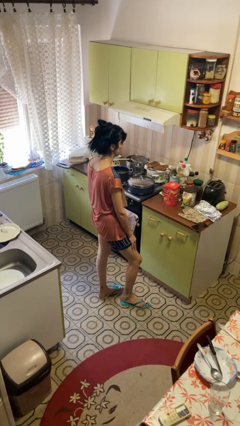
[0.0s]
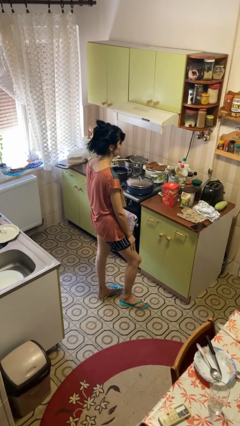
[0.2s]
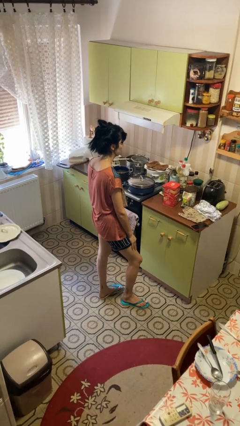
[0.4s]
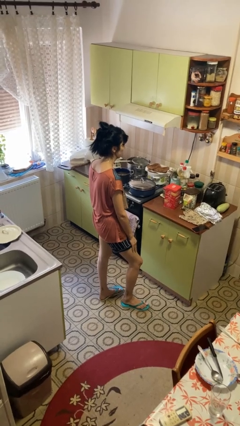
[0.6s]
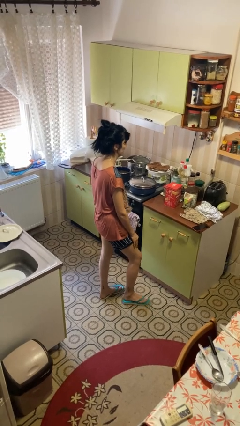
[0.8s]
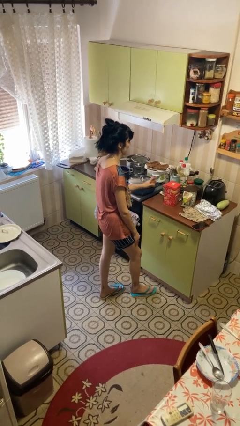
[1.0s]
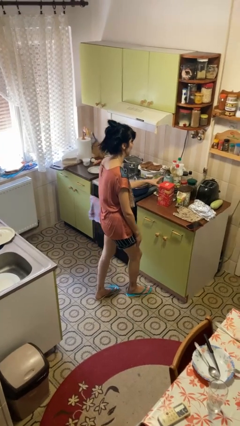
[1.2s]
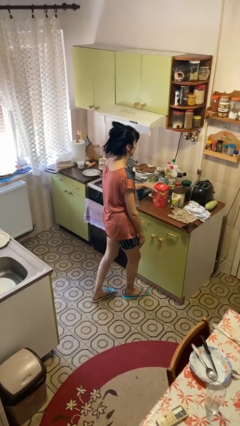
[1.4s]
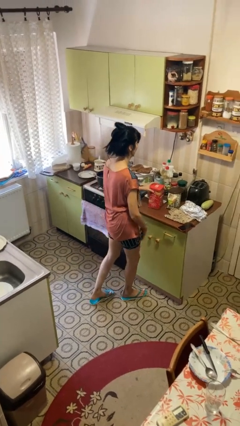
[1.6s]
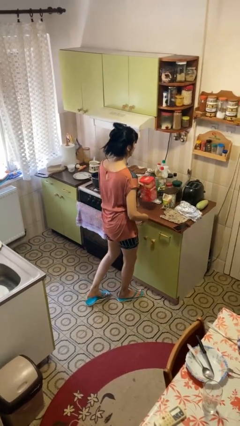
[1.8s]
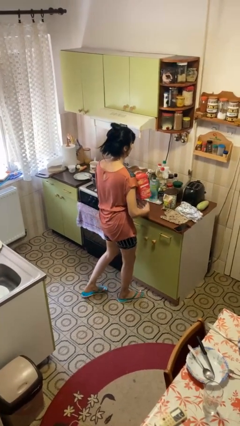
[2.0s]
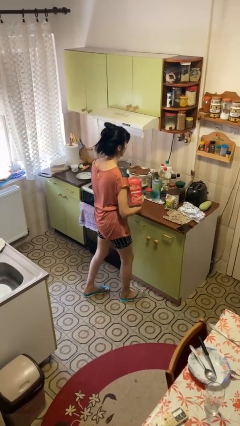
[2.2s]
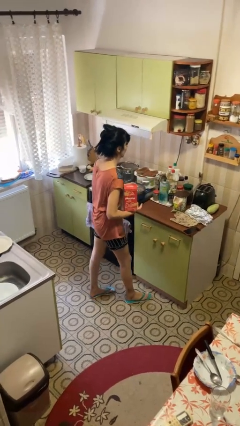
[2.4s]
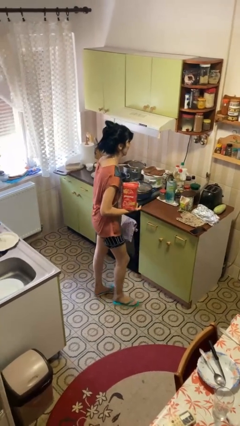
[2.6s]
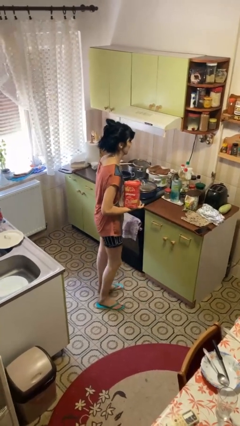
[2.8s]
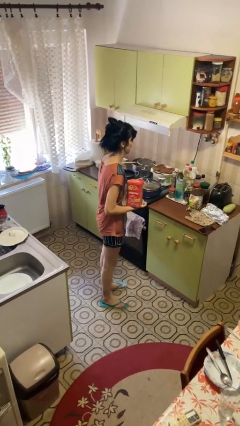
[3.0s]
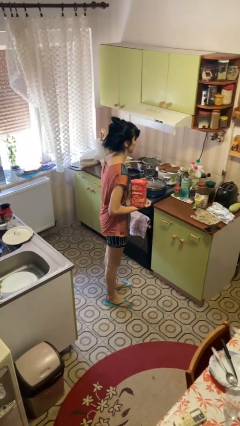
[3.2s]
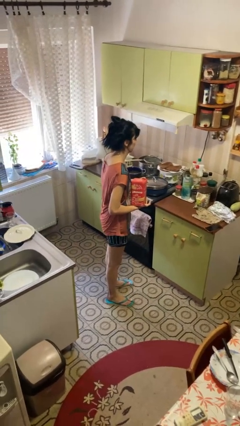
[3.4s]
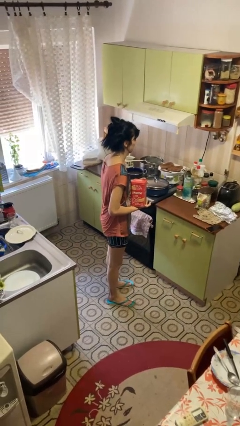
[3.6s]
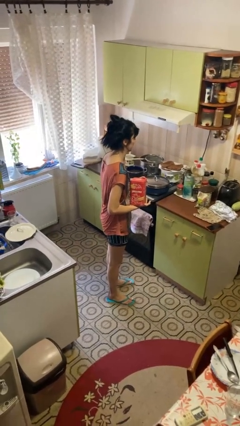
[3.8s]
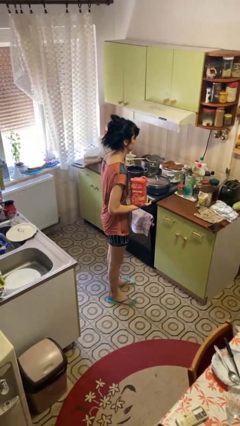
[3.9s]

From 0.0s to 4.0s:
person picks up object from countertop

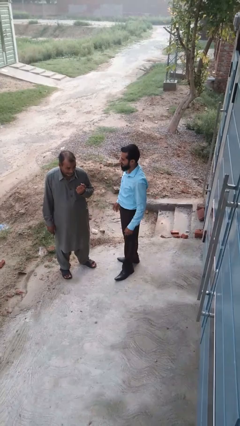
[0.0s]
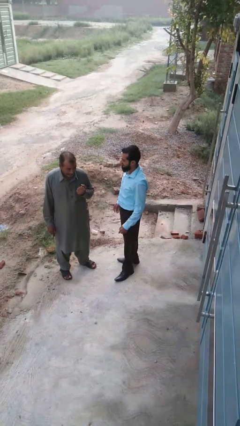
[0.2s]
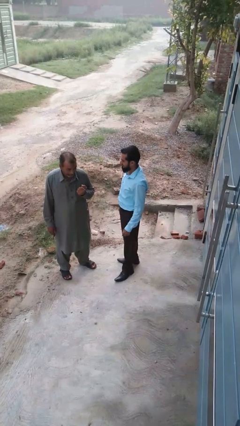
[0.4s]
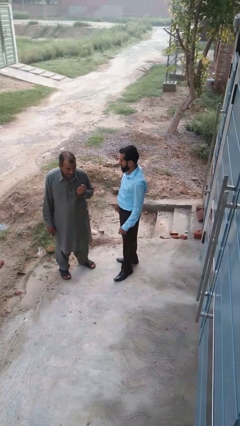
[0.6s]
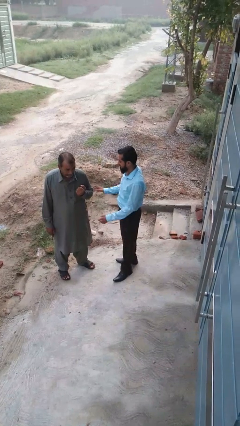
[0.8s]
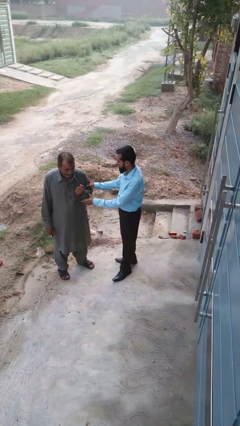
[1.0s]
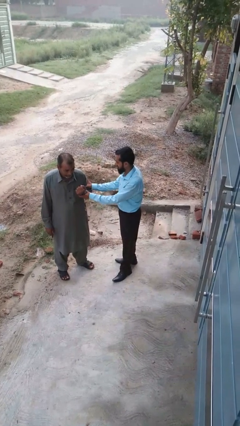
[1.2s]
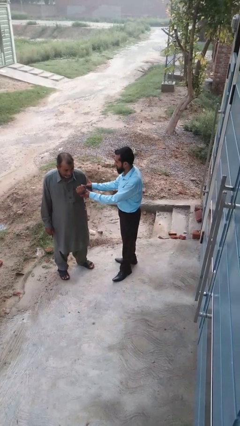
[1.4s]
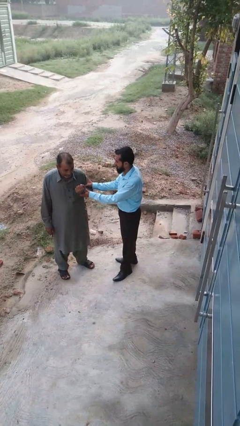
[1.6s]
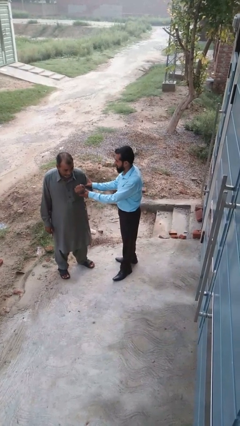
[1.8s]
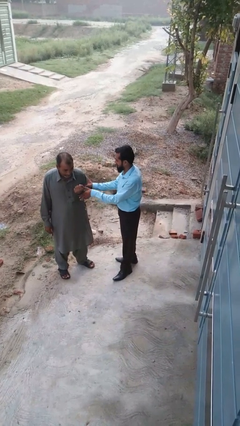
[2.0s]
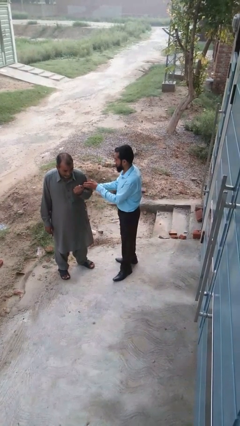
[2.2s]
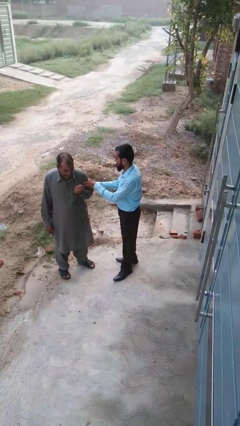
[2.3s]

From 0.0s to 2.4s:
person grabs person by bicep

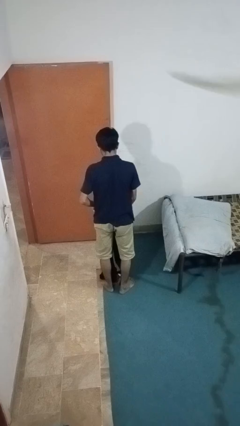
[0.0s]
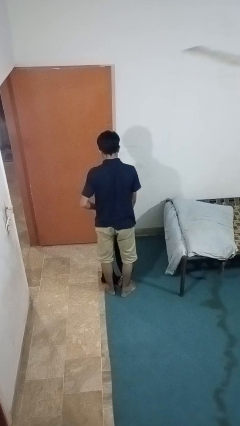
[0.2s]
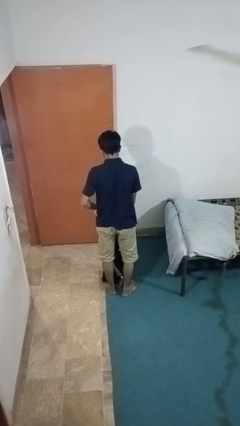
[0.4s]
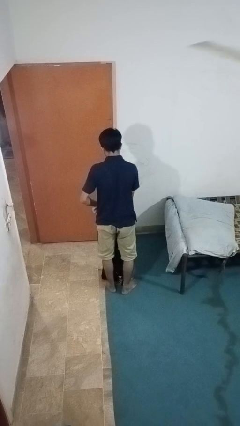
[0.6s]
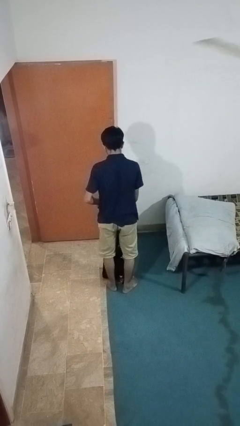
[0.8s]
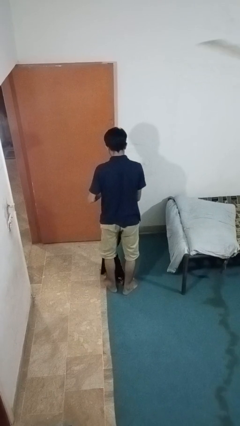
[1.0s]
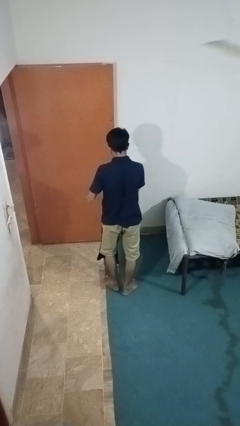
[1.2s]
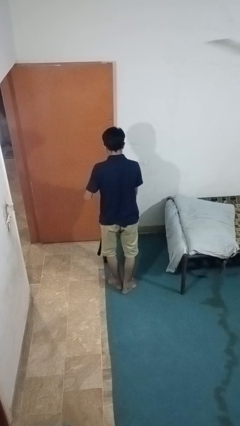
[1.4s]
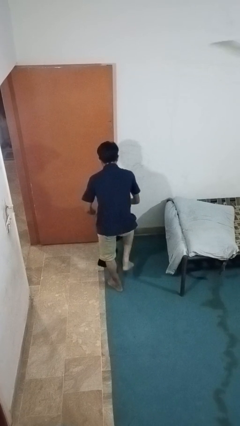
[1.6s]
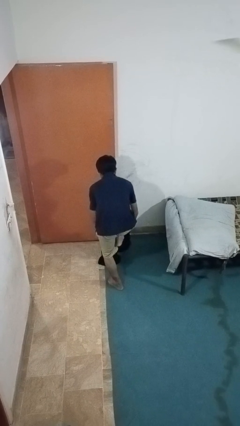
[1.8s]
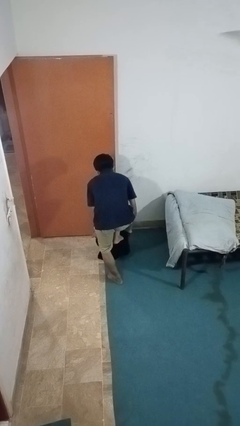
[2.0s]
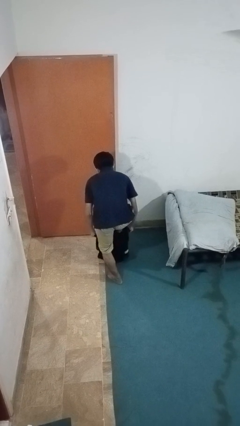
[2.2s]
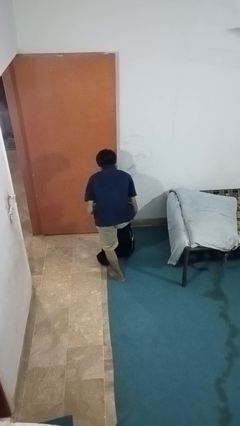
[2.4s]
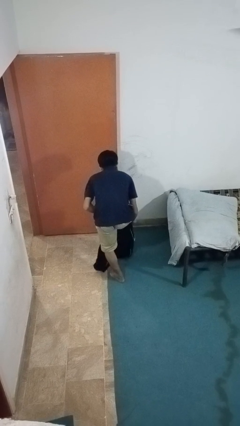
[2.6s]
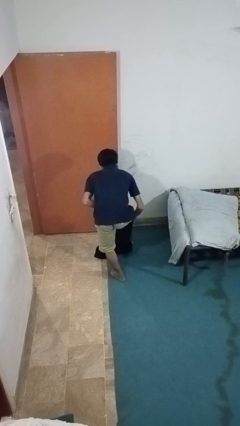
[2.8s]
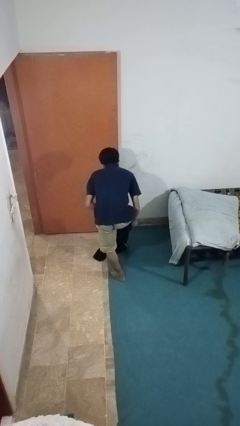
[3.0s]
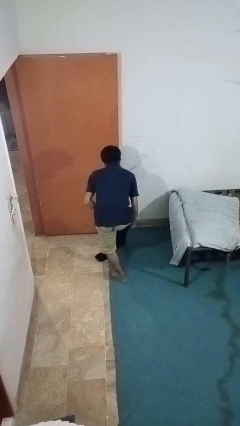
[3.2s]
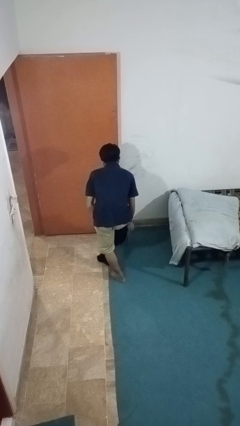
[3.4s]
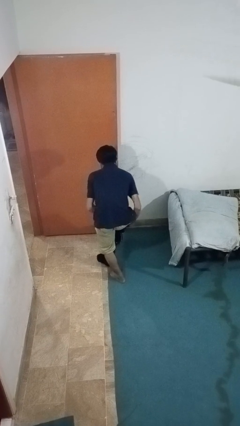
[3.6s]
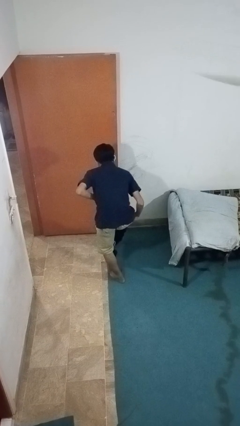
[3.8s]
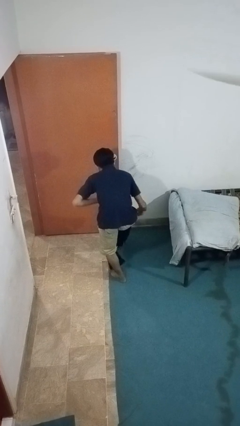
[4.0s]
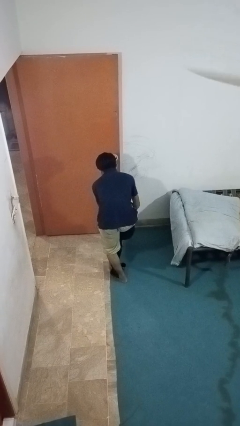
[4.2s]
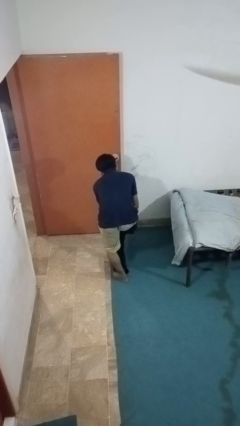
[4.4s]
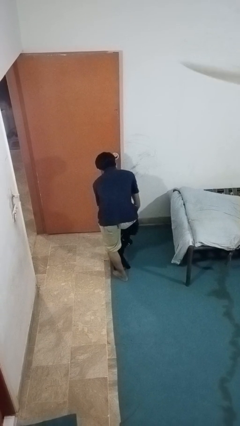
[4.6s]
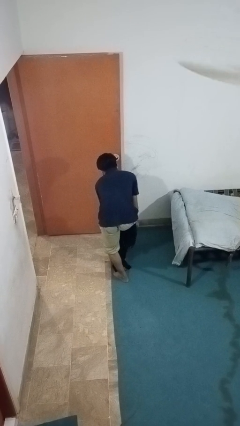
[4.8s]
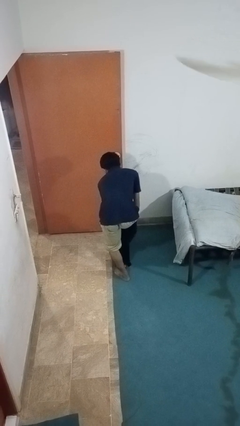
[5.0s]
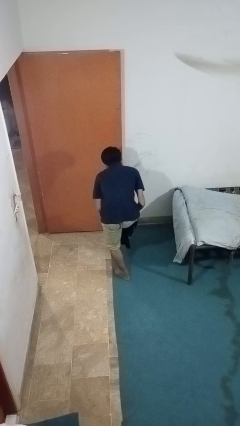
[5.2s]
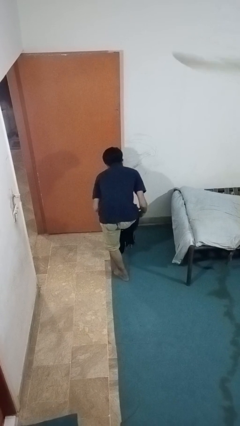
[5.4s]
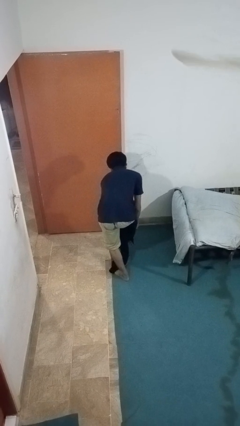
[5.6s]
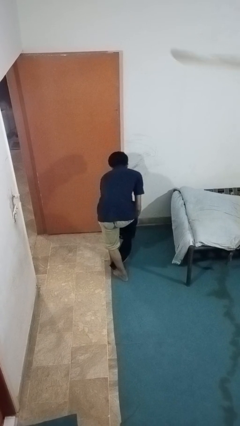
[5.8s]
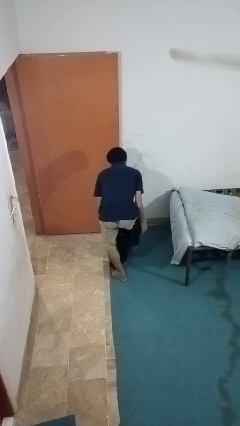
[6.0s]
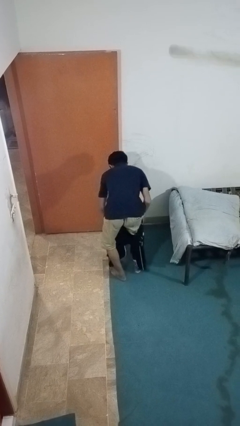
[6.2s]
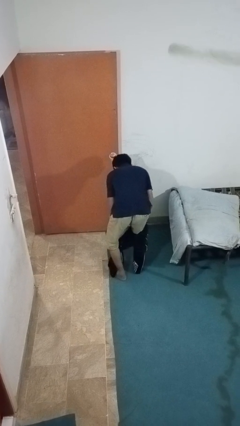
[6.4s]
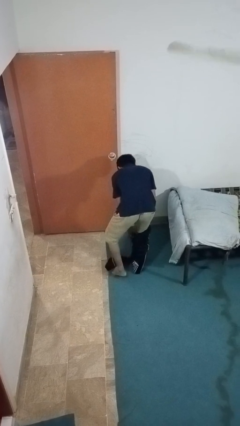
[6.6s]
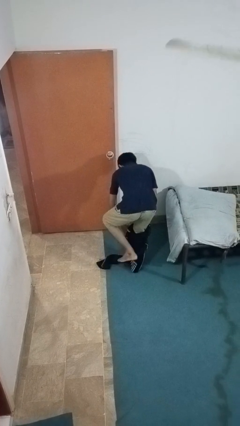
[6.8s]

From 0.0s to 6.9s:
person puts on pants

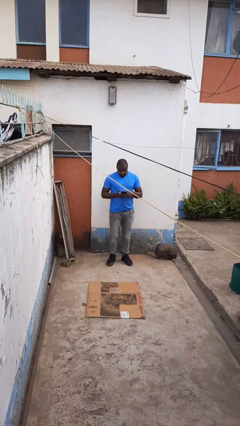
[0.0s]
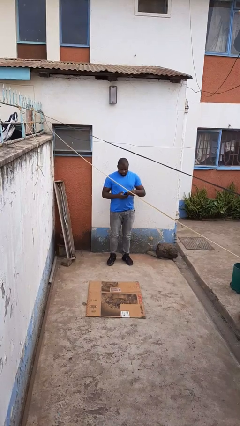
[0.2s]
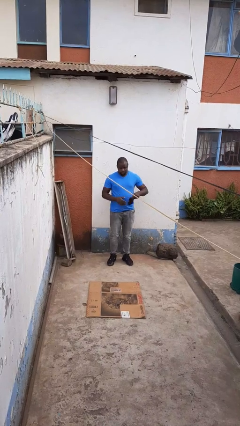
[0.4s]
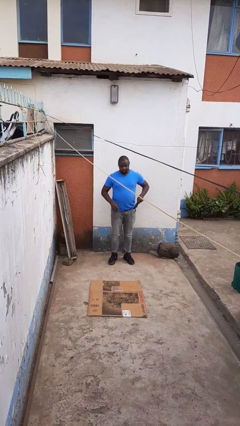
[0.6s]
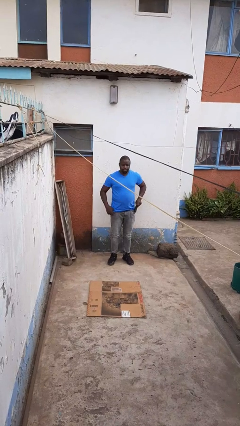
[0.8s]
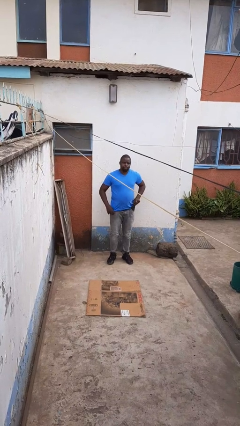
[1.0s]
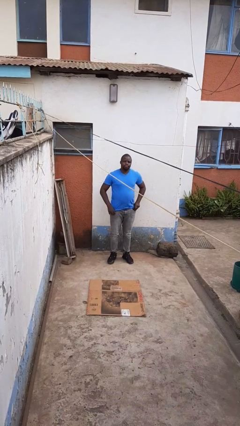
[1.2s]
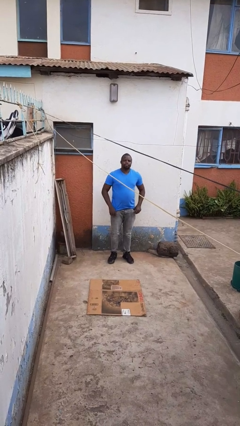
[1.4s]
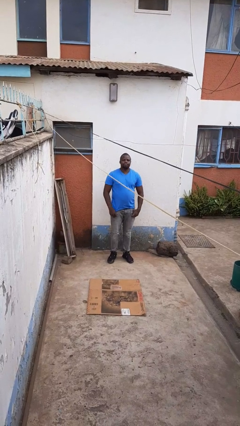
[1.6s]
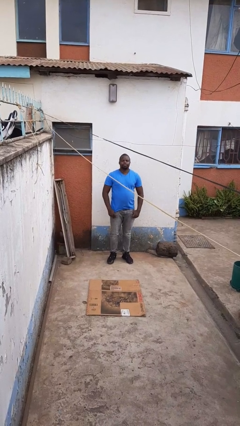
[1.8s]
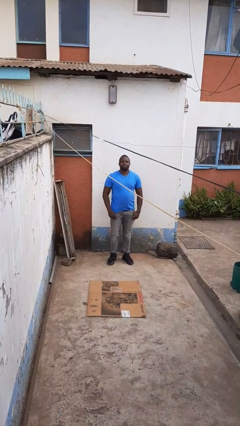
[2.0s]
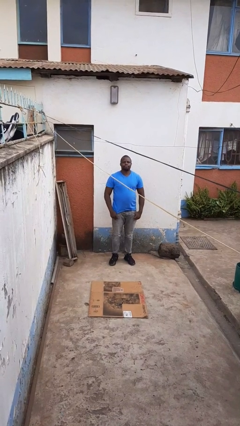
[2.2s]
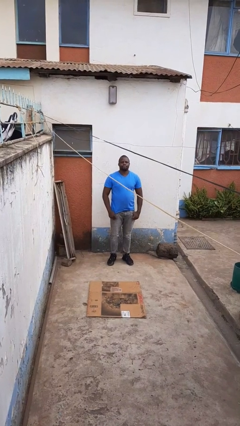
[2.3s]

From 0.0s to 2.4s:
person puts phone into pocket

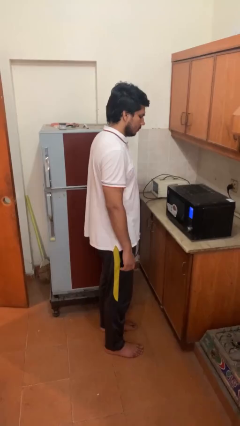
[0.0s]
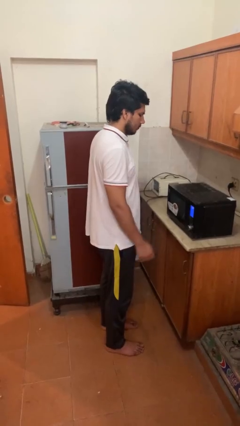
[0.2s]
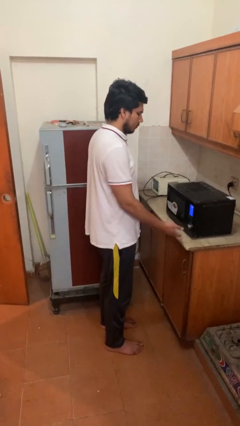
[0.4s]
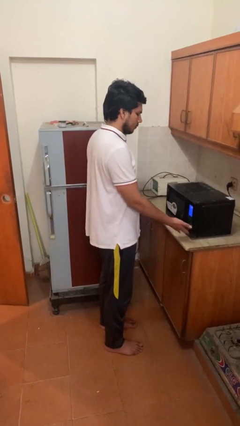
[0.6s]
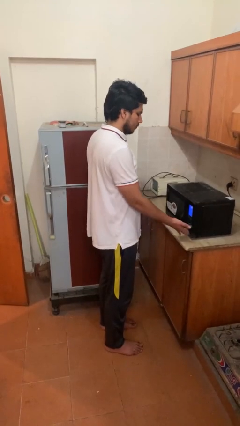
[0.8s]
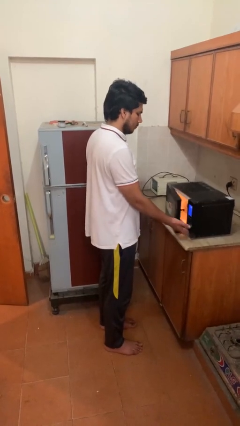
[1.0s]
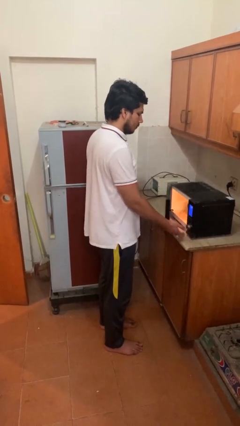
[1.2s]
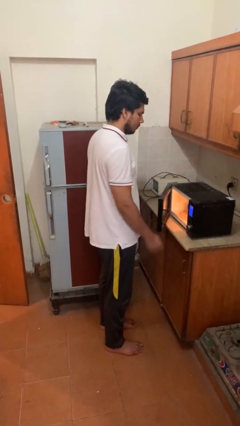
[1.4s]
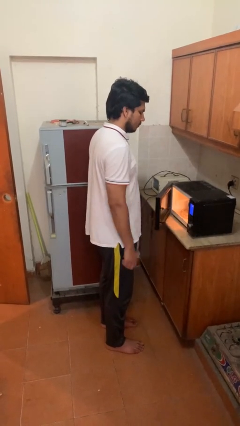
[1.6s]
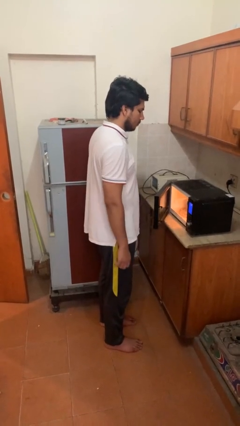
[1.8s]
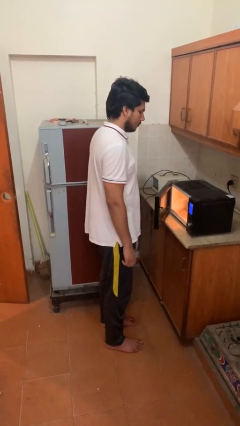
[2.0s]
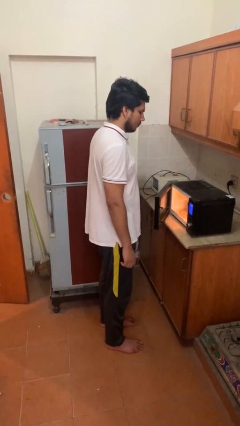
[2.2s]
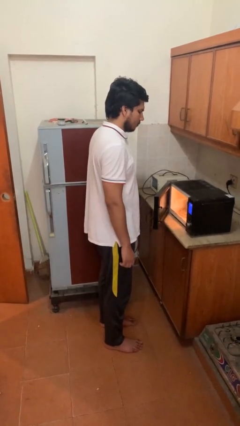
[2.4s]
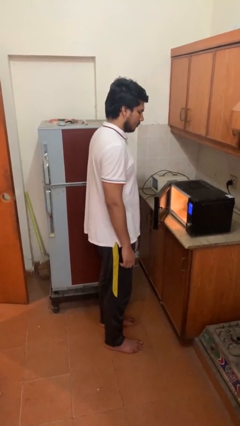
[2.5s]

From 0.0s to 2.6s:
person opens microwave
